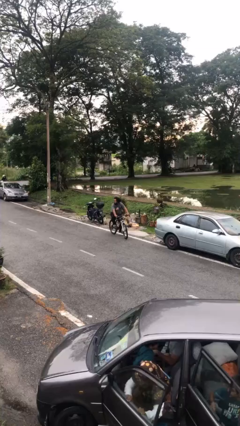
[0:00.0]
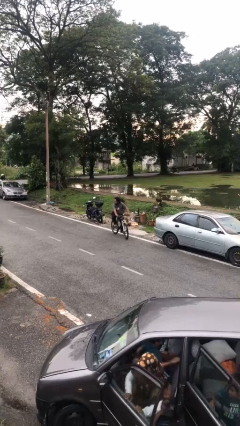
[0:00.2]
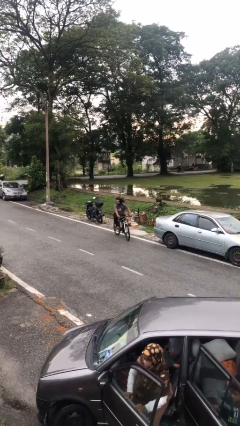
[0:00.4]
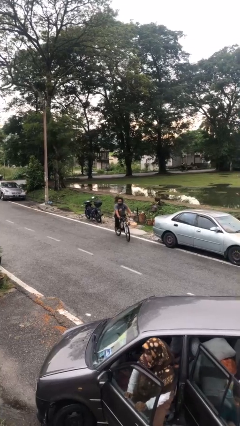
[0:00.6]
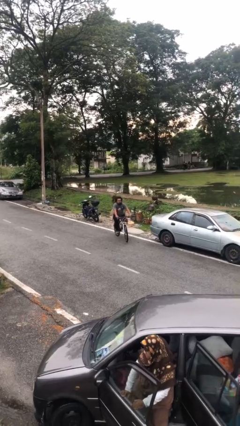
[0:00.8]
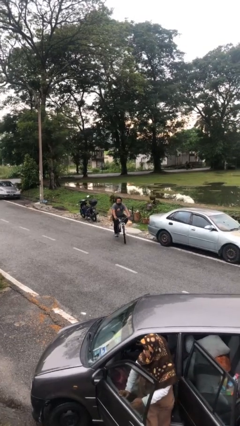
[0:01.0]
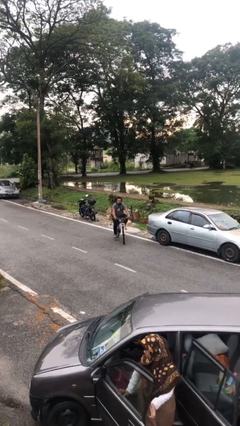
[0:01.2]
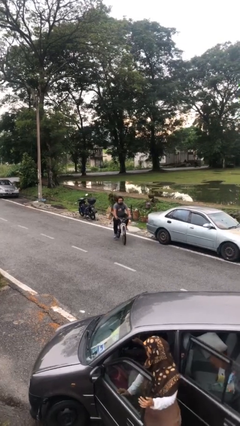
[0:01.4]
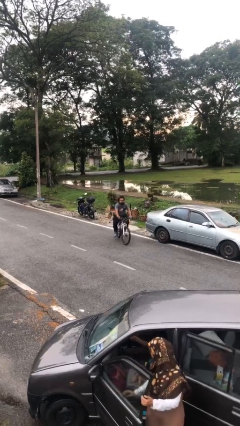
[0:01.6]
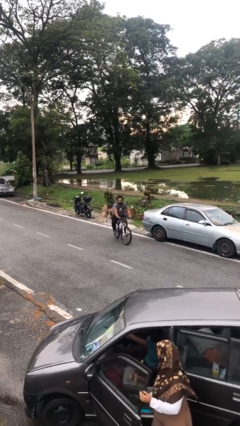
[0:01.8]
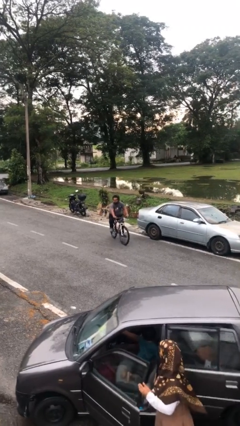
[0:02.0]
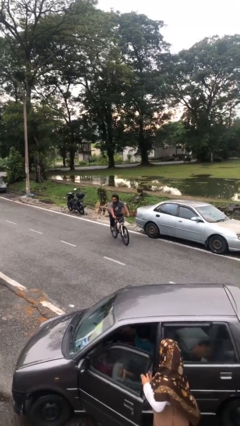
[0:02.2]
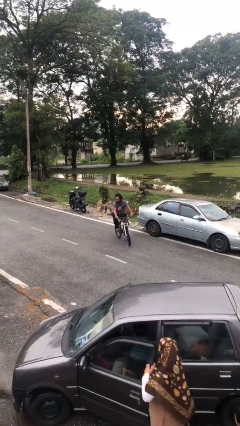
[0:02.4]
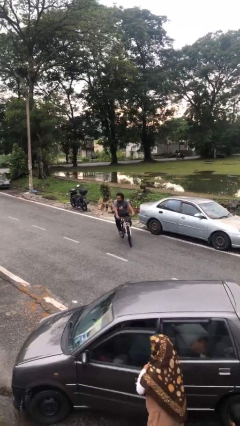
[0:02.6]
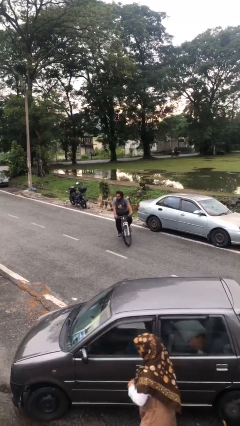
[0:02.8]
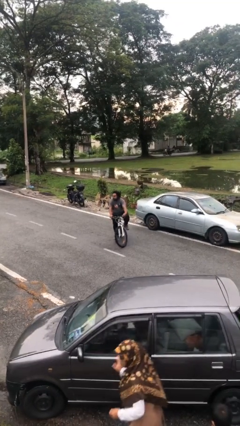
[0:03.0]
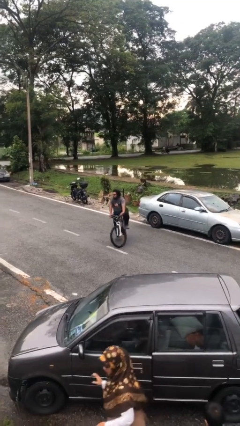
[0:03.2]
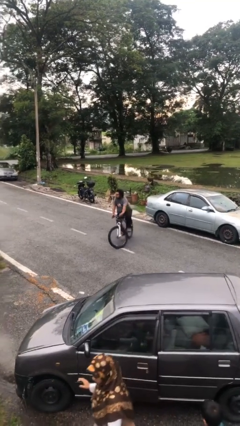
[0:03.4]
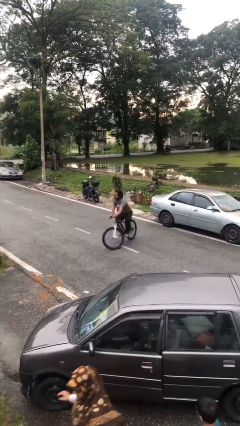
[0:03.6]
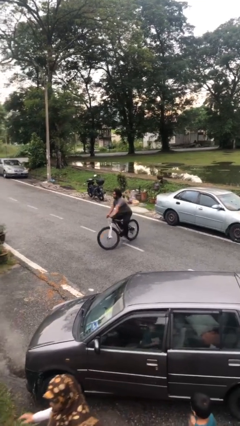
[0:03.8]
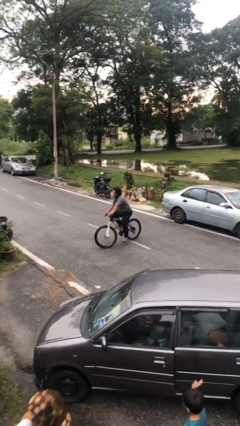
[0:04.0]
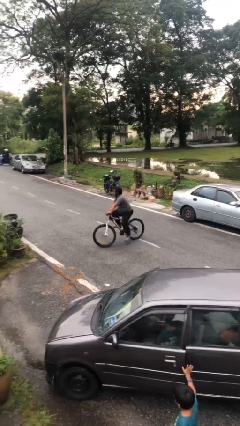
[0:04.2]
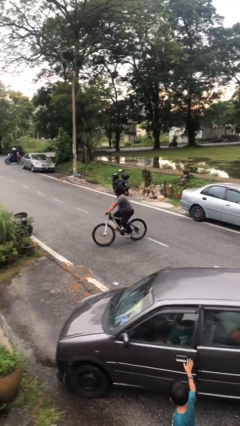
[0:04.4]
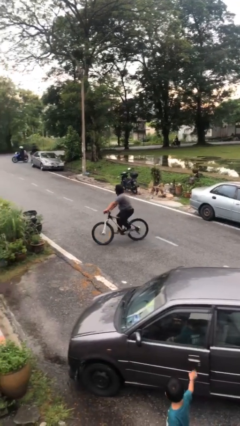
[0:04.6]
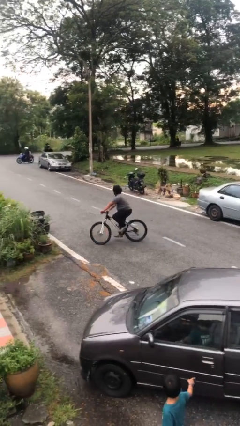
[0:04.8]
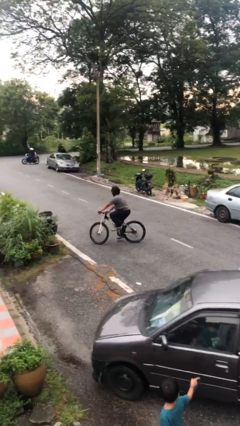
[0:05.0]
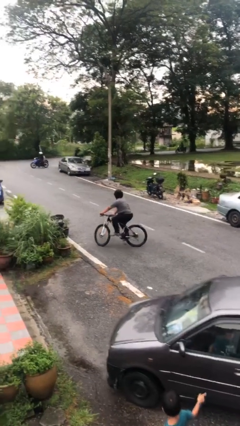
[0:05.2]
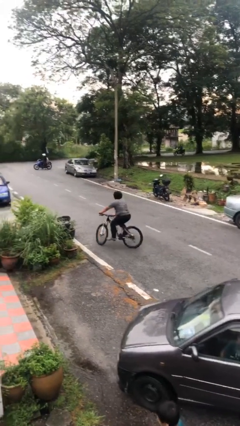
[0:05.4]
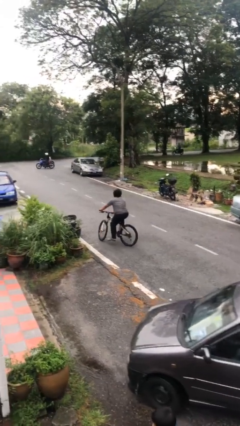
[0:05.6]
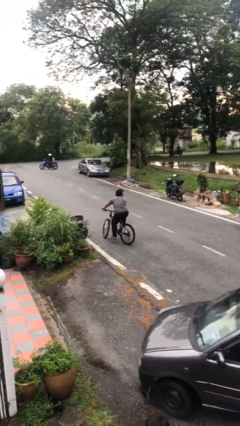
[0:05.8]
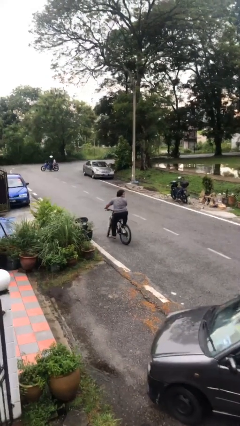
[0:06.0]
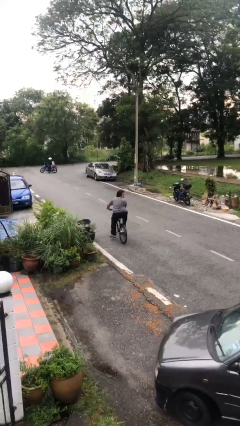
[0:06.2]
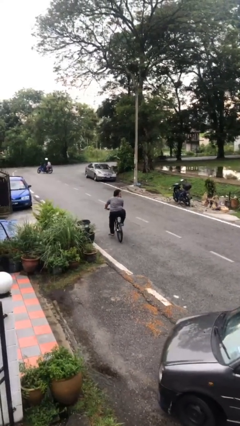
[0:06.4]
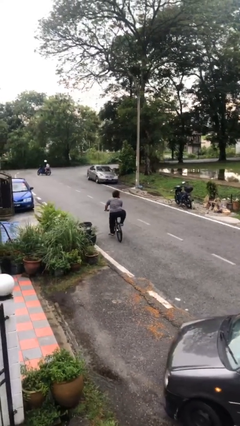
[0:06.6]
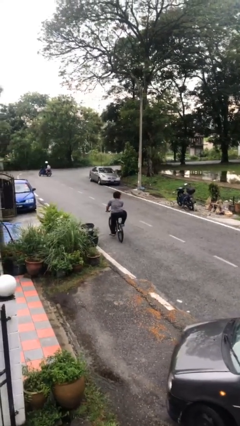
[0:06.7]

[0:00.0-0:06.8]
person rides bicycle

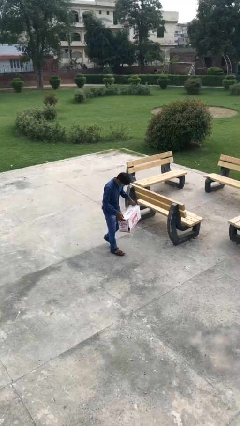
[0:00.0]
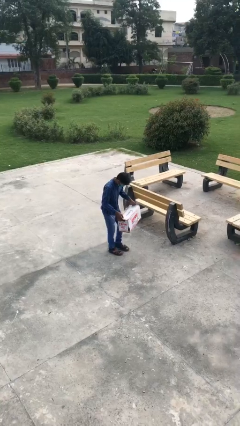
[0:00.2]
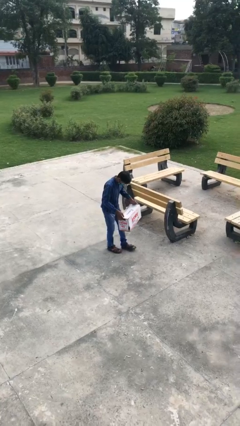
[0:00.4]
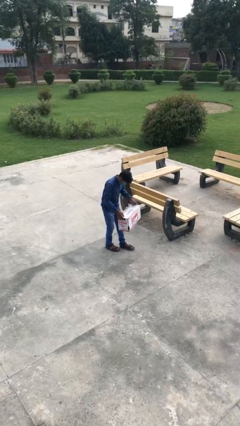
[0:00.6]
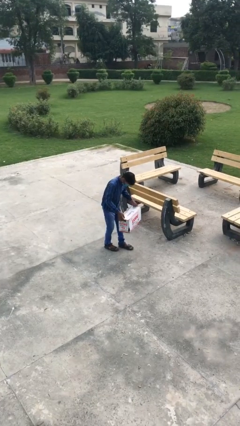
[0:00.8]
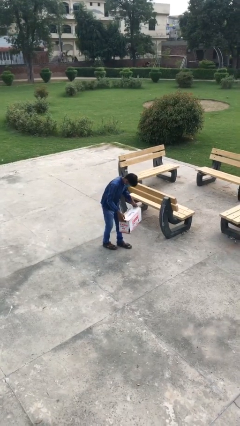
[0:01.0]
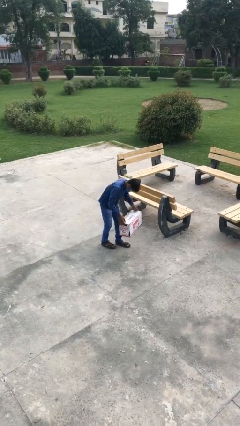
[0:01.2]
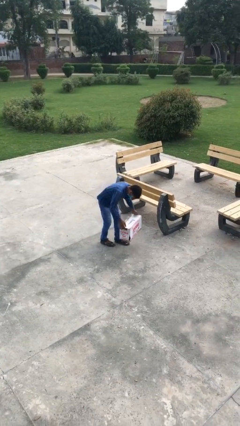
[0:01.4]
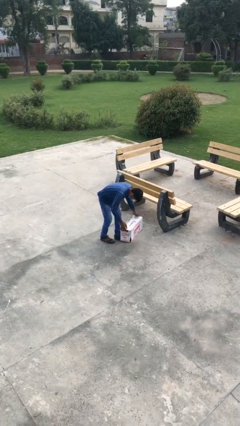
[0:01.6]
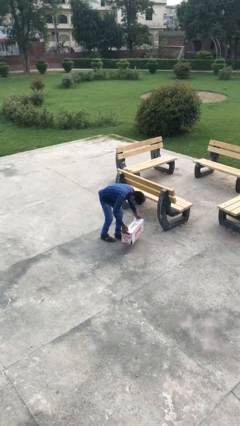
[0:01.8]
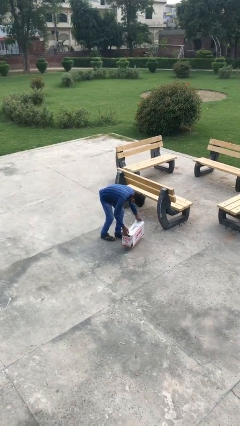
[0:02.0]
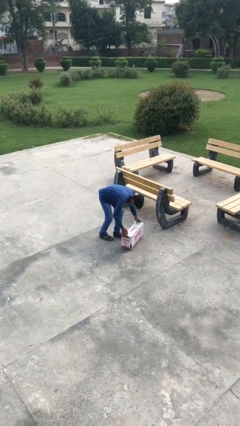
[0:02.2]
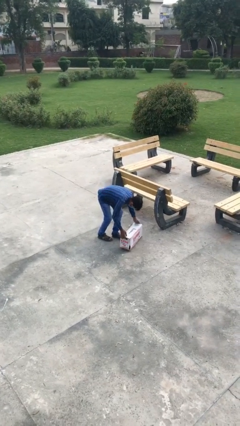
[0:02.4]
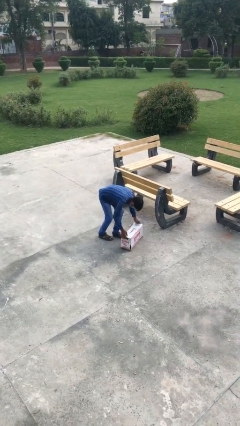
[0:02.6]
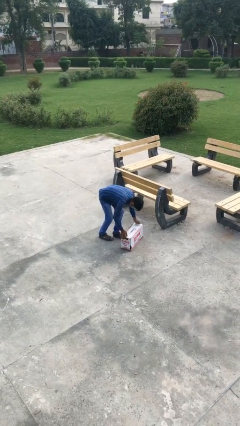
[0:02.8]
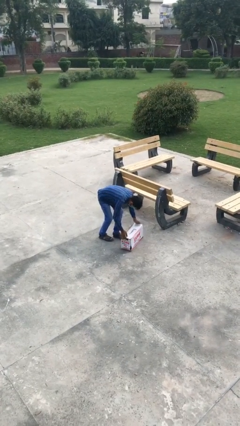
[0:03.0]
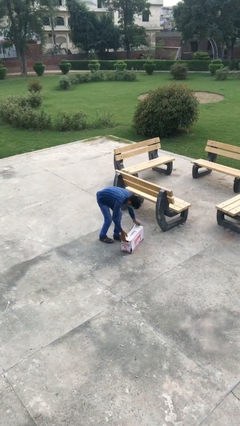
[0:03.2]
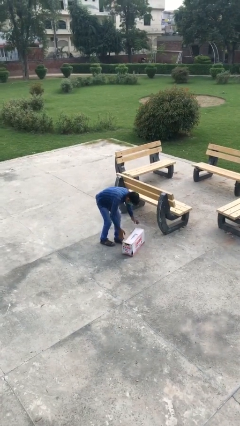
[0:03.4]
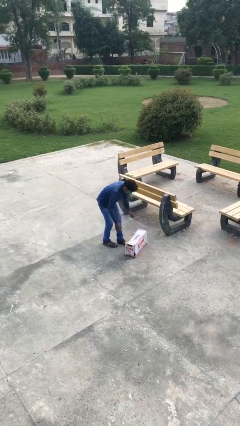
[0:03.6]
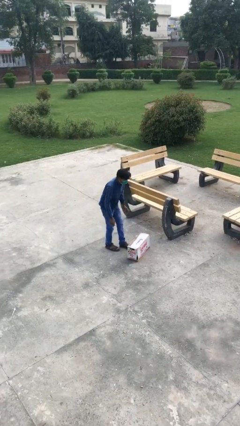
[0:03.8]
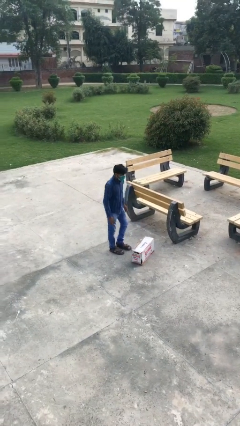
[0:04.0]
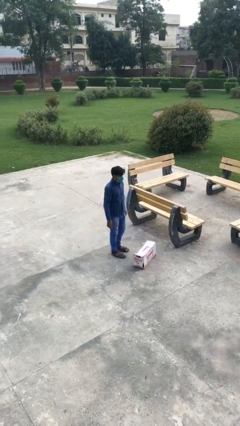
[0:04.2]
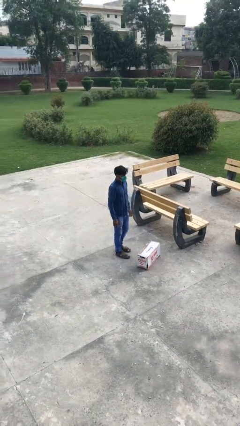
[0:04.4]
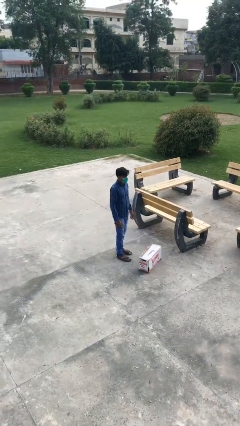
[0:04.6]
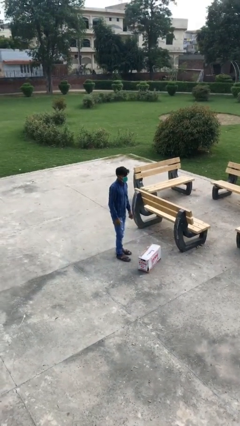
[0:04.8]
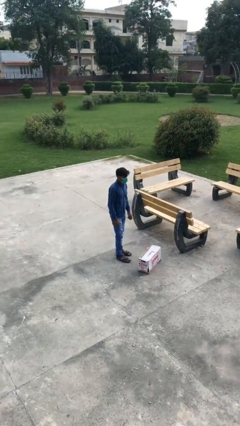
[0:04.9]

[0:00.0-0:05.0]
person puts down object on floor

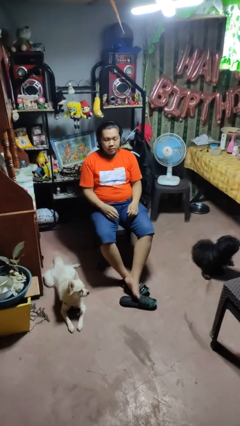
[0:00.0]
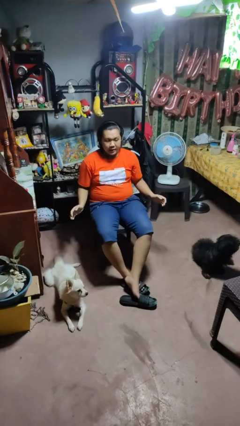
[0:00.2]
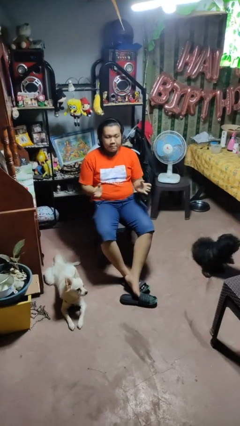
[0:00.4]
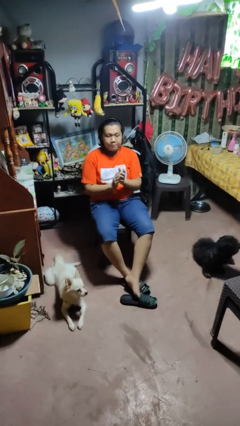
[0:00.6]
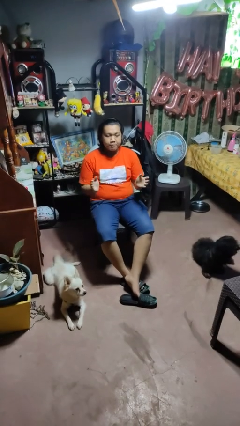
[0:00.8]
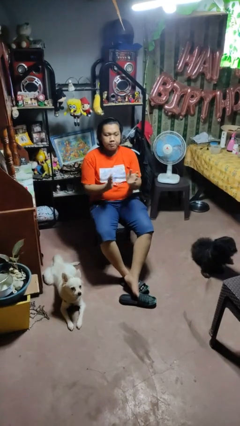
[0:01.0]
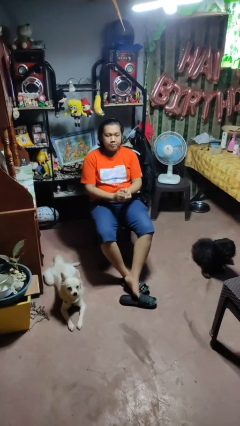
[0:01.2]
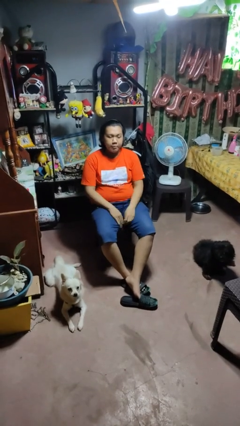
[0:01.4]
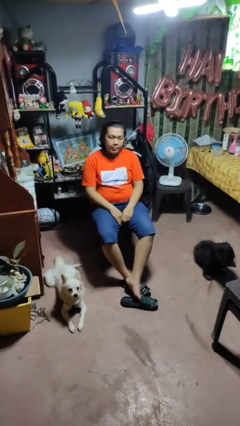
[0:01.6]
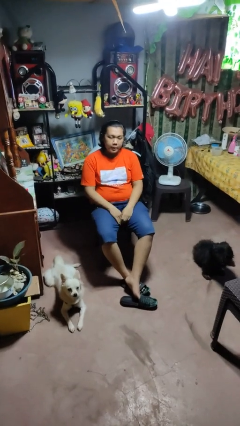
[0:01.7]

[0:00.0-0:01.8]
person claps hands

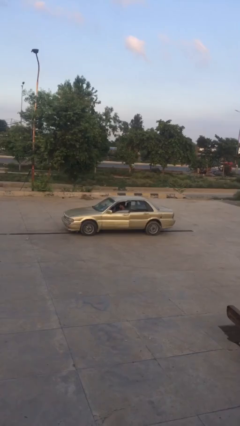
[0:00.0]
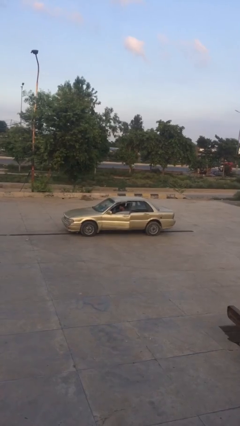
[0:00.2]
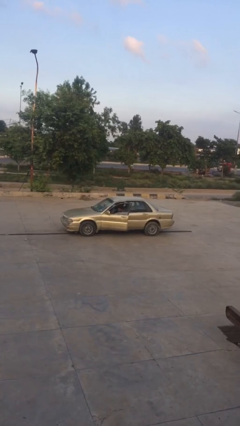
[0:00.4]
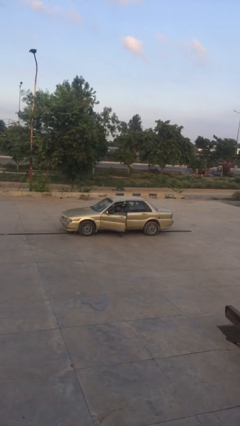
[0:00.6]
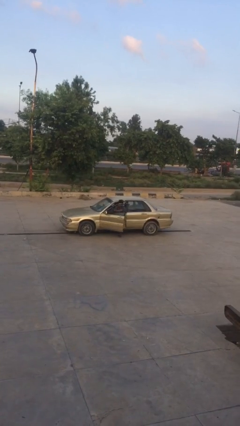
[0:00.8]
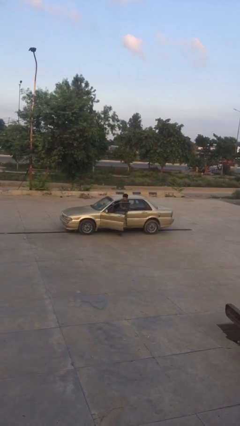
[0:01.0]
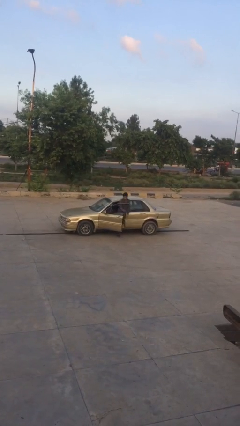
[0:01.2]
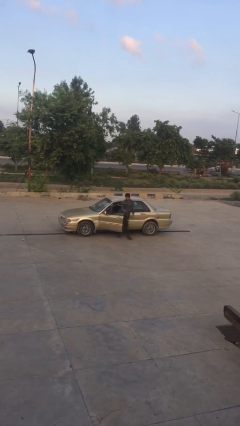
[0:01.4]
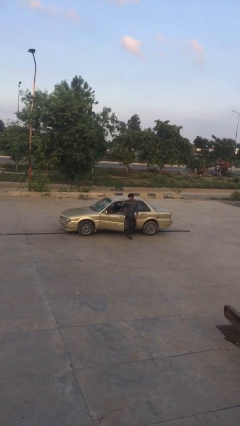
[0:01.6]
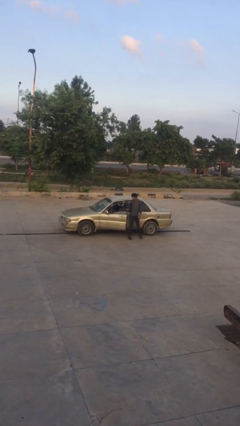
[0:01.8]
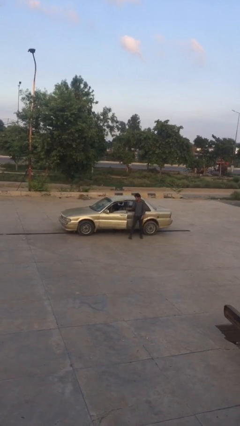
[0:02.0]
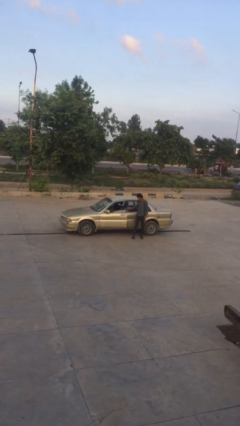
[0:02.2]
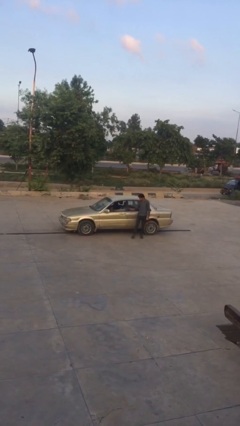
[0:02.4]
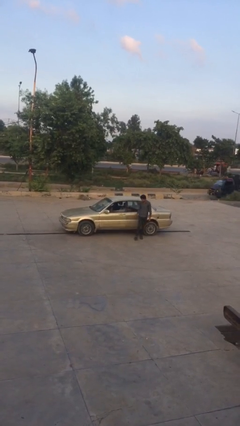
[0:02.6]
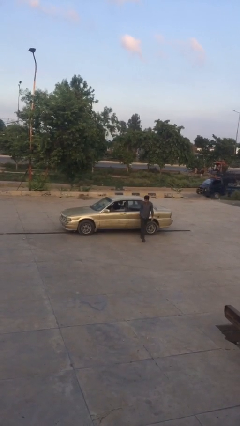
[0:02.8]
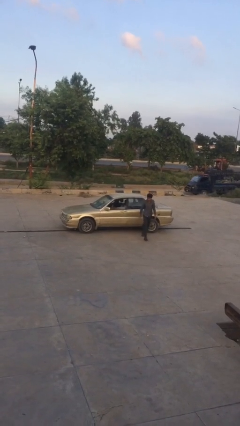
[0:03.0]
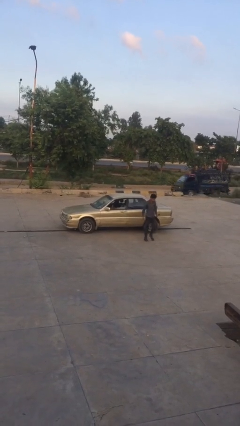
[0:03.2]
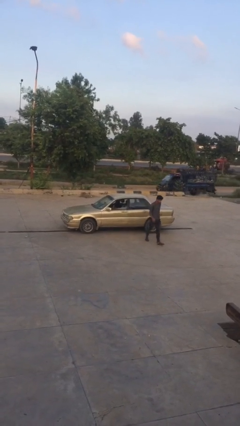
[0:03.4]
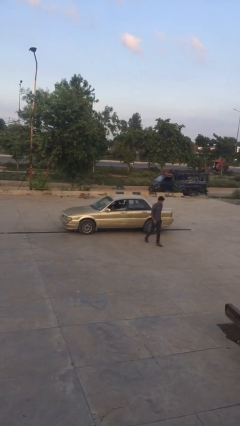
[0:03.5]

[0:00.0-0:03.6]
car drops off person

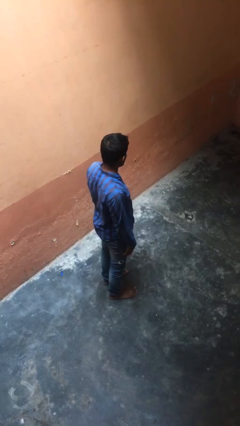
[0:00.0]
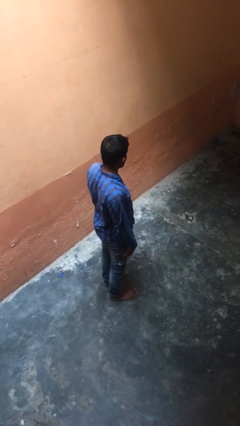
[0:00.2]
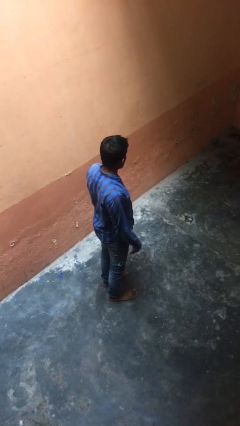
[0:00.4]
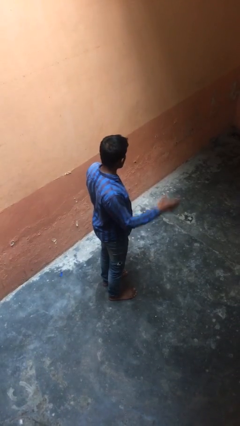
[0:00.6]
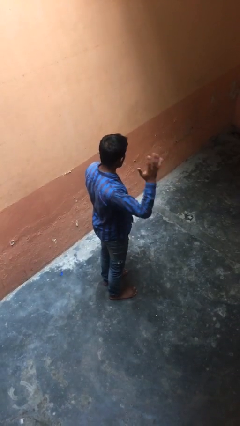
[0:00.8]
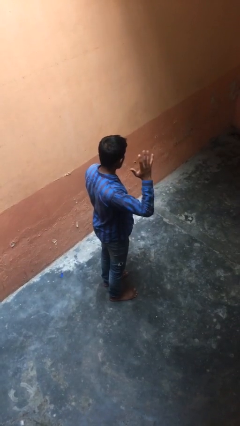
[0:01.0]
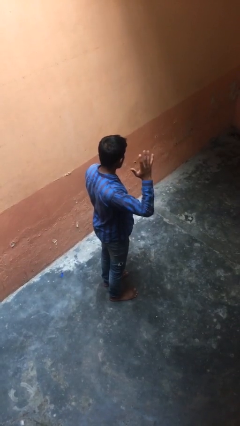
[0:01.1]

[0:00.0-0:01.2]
person gestures number five
